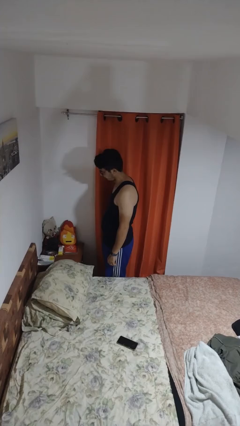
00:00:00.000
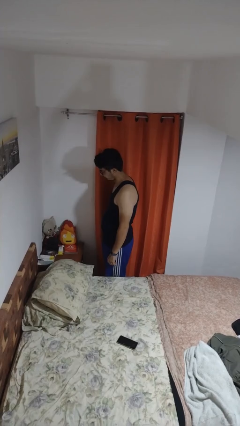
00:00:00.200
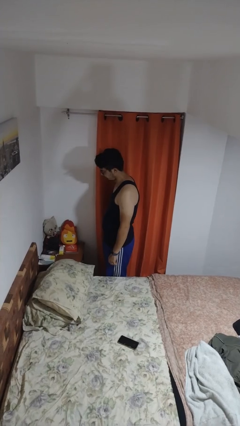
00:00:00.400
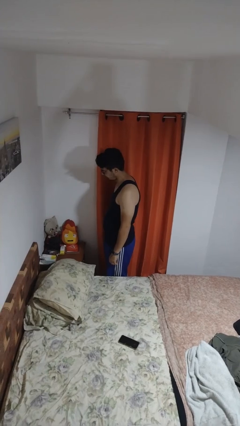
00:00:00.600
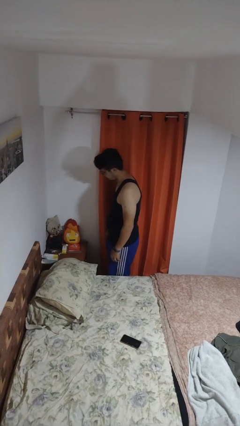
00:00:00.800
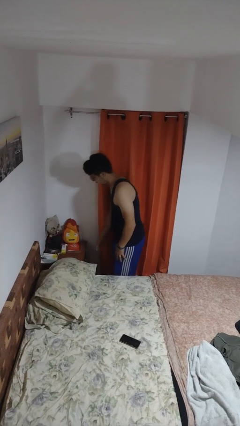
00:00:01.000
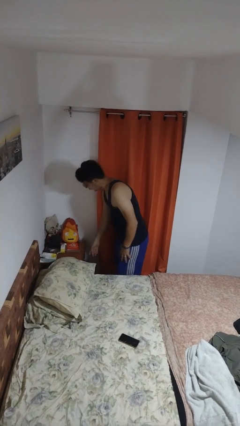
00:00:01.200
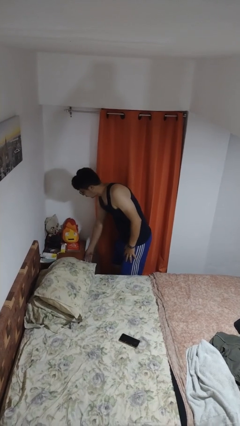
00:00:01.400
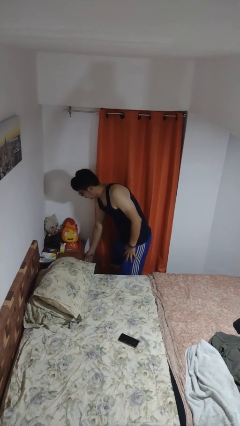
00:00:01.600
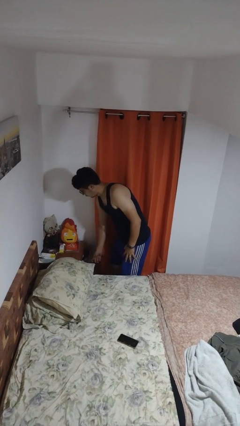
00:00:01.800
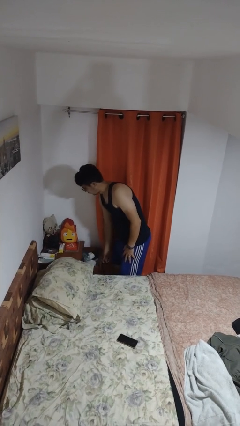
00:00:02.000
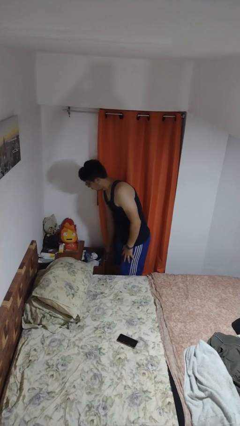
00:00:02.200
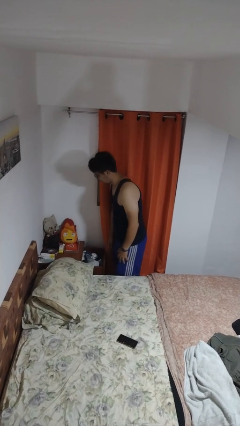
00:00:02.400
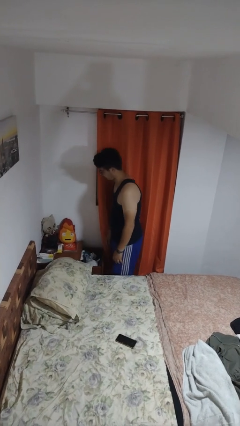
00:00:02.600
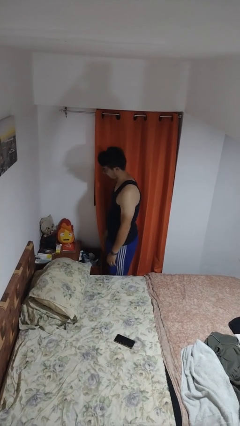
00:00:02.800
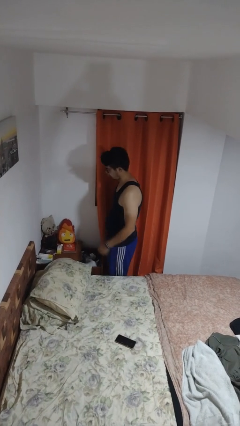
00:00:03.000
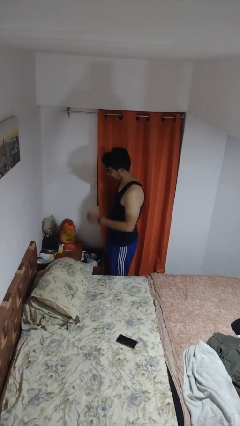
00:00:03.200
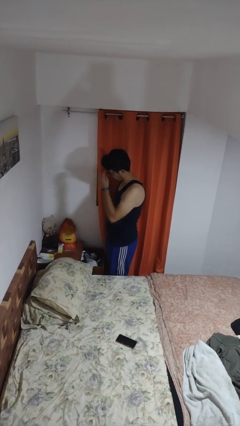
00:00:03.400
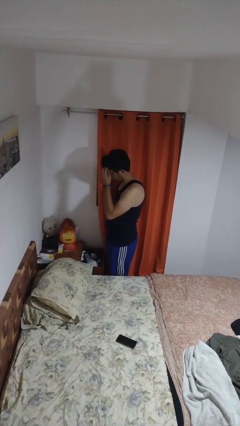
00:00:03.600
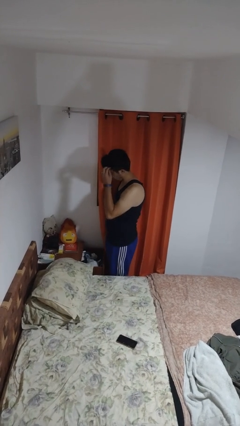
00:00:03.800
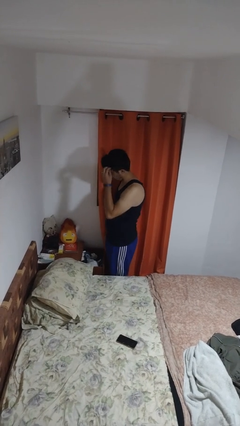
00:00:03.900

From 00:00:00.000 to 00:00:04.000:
person opens dresser drawer

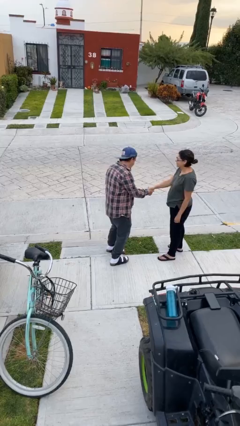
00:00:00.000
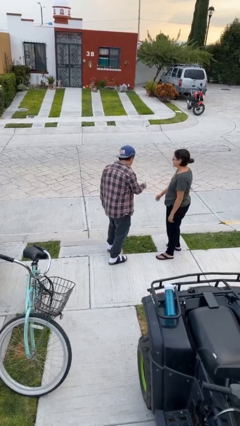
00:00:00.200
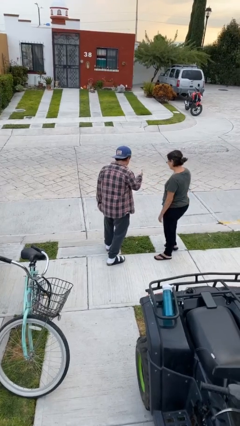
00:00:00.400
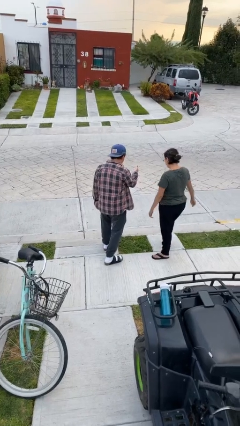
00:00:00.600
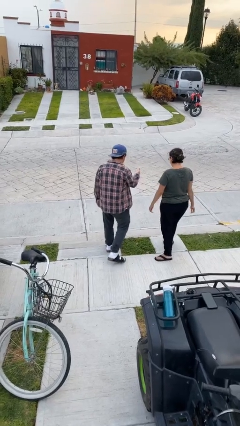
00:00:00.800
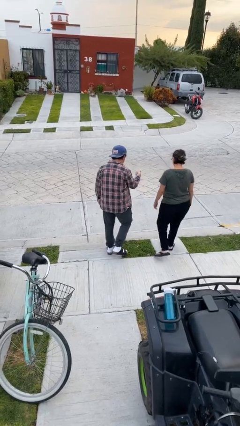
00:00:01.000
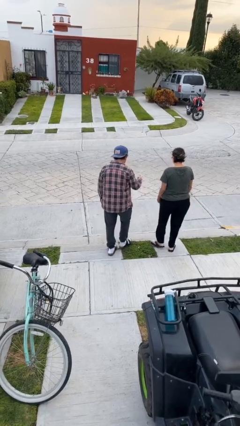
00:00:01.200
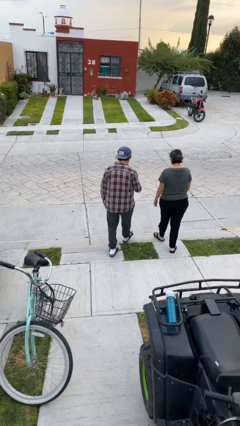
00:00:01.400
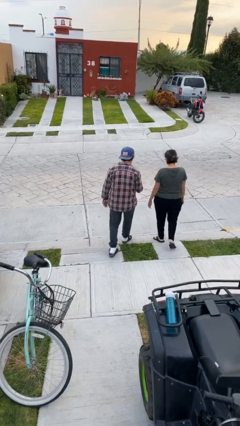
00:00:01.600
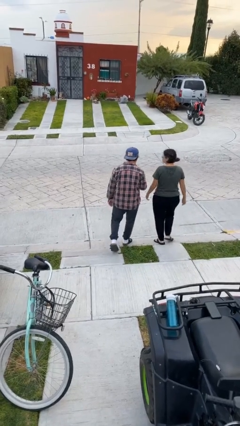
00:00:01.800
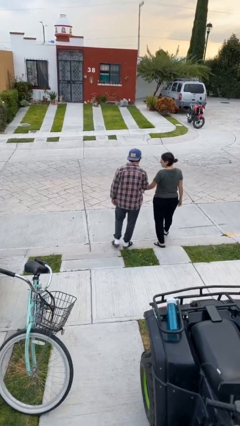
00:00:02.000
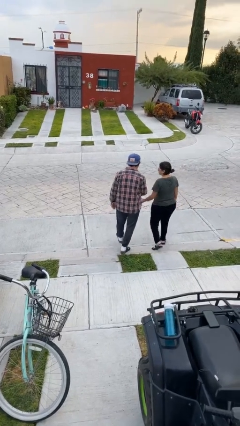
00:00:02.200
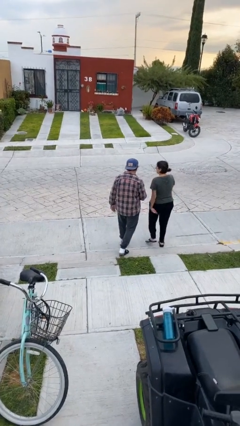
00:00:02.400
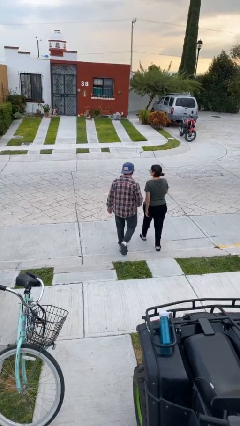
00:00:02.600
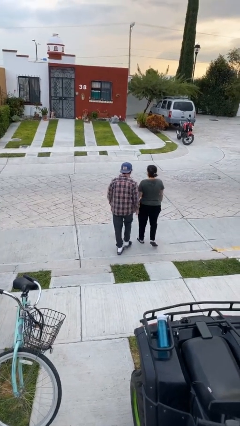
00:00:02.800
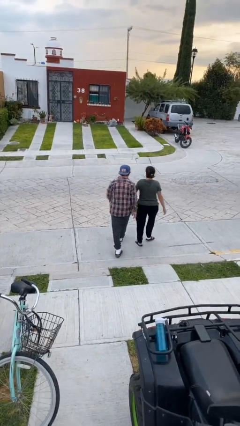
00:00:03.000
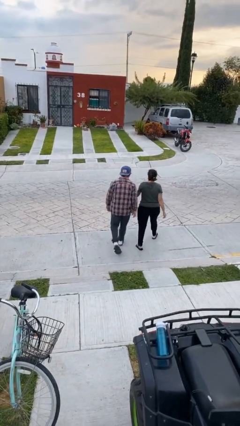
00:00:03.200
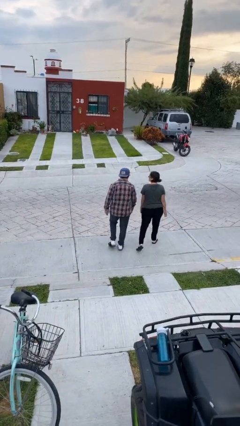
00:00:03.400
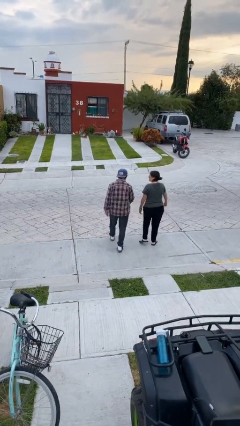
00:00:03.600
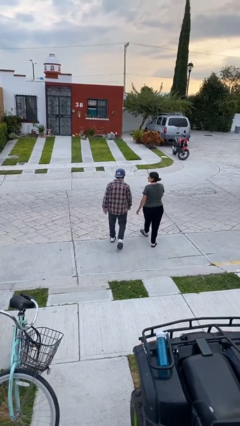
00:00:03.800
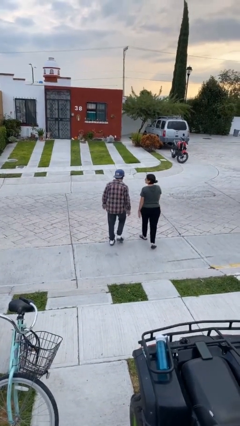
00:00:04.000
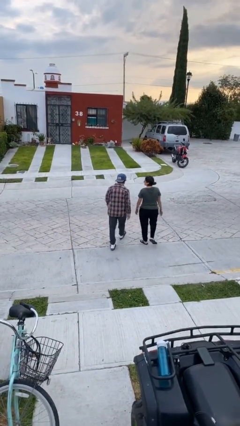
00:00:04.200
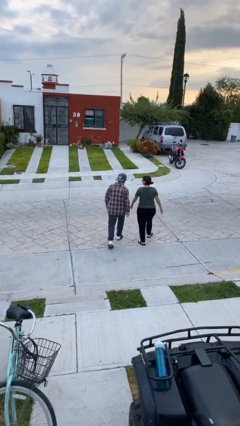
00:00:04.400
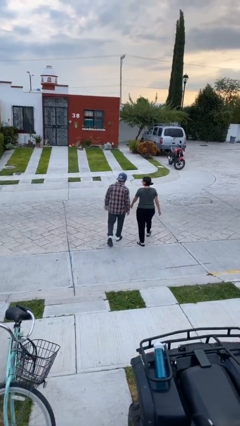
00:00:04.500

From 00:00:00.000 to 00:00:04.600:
person talks to person

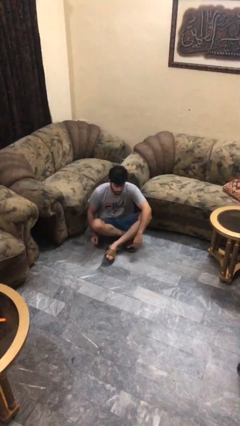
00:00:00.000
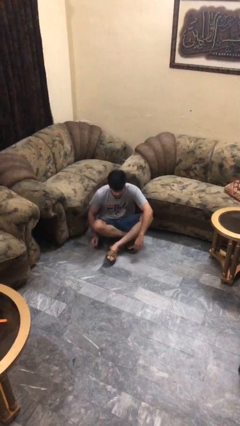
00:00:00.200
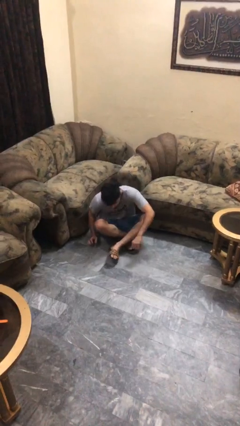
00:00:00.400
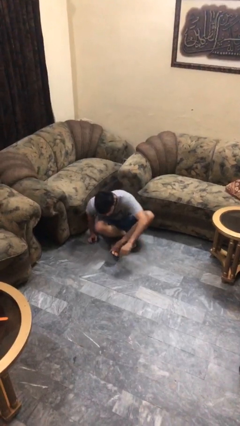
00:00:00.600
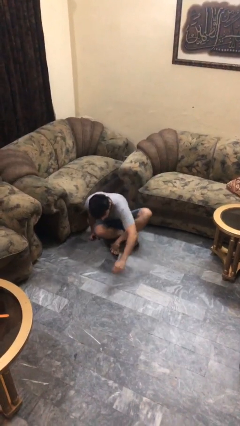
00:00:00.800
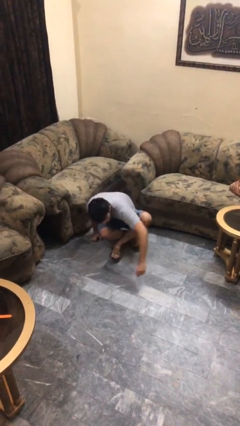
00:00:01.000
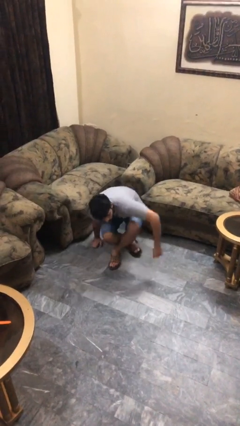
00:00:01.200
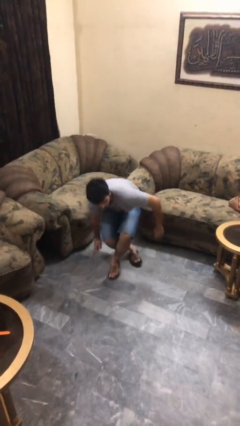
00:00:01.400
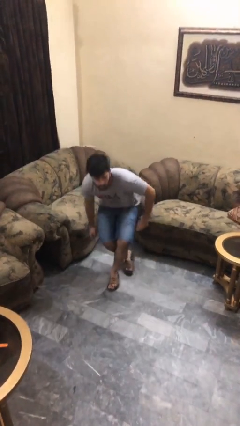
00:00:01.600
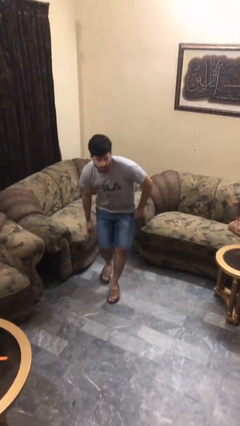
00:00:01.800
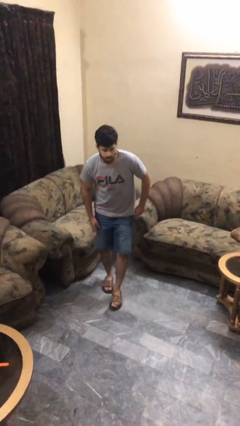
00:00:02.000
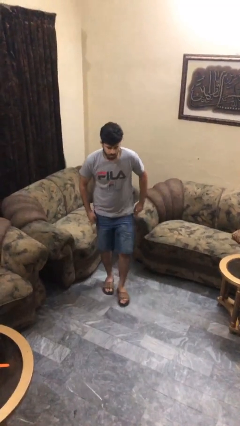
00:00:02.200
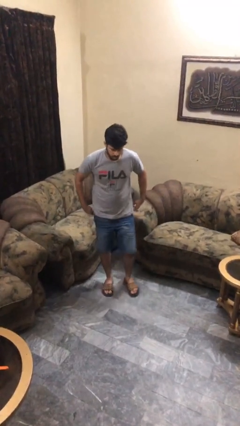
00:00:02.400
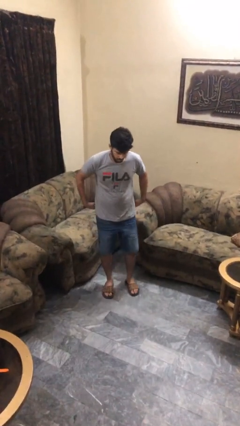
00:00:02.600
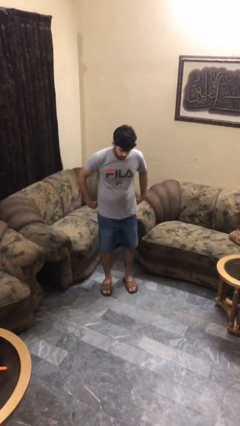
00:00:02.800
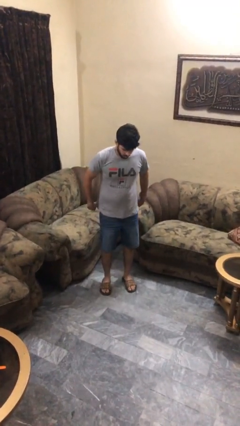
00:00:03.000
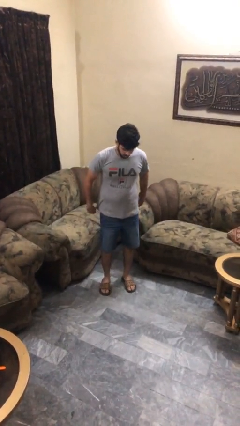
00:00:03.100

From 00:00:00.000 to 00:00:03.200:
person stands up from floor

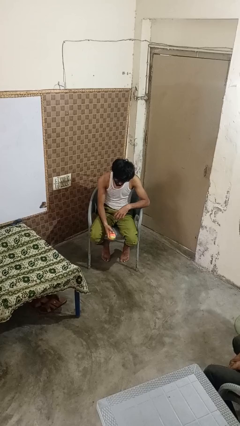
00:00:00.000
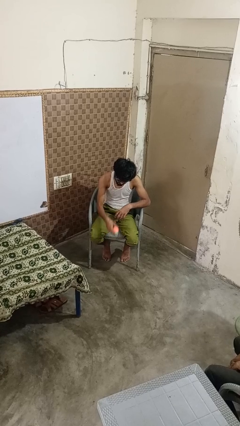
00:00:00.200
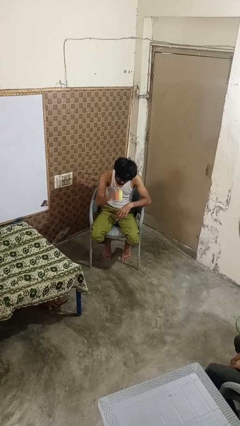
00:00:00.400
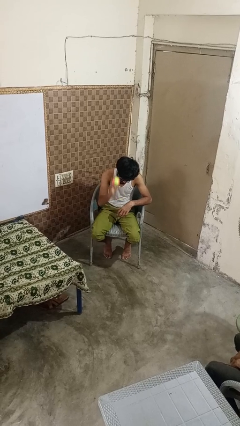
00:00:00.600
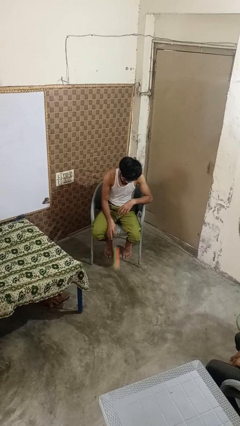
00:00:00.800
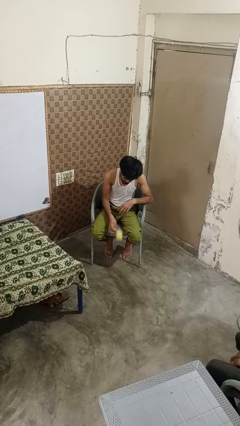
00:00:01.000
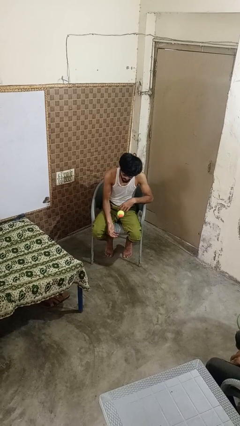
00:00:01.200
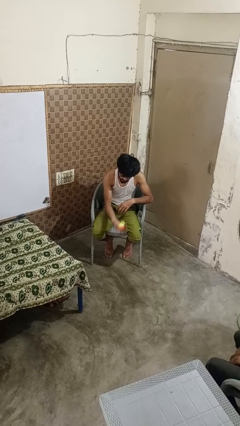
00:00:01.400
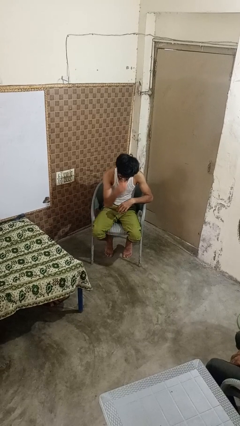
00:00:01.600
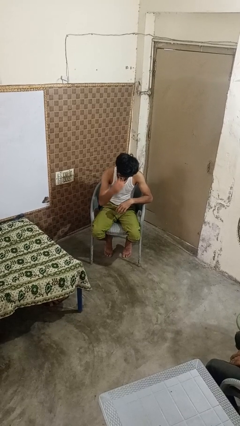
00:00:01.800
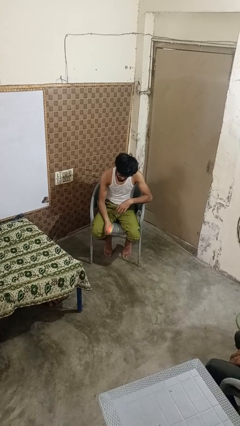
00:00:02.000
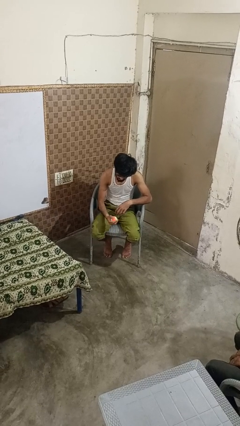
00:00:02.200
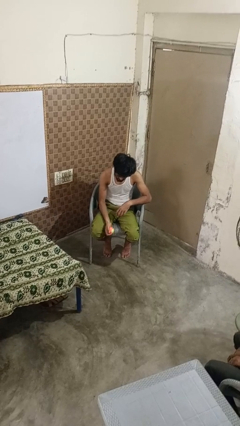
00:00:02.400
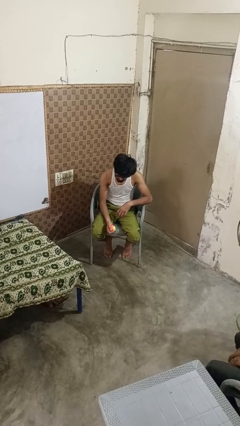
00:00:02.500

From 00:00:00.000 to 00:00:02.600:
person bounces ball on floor

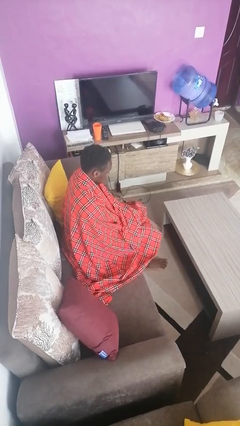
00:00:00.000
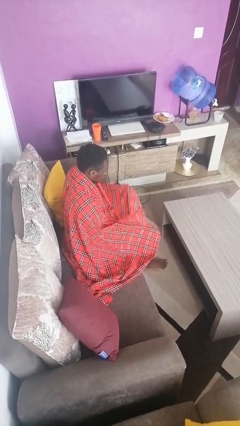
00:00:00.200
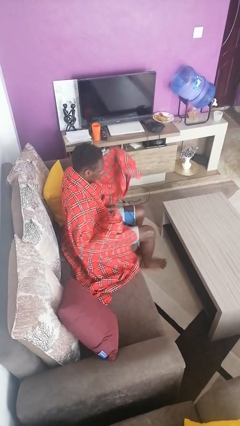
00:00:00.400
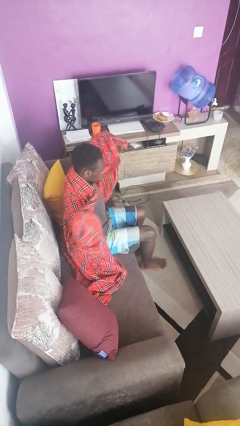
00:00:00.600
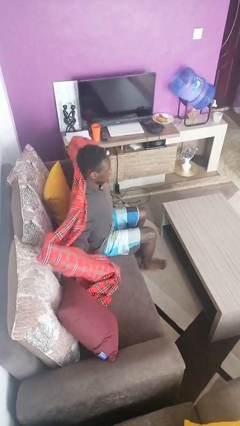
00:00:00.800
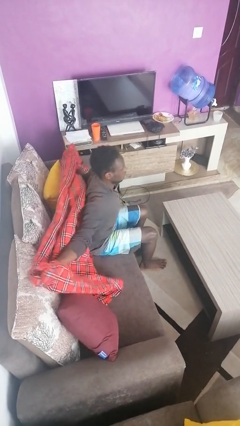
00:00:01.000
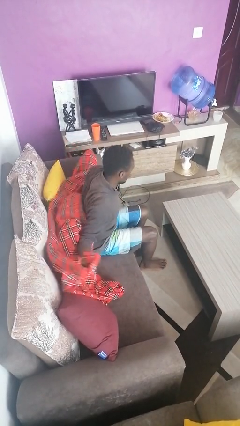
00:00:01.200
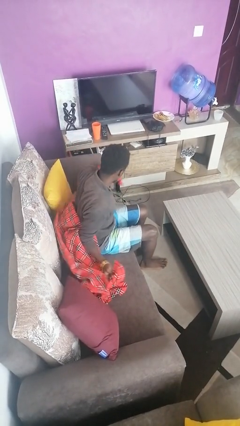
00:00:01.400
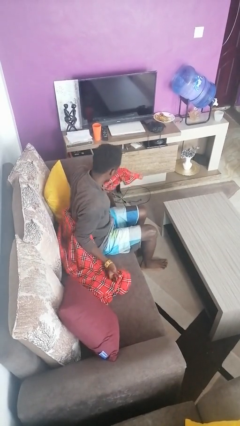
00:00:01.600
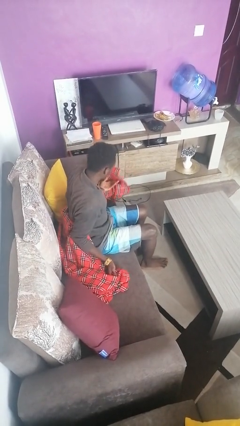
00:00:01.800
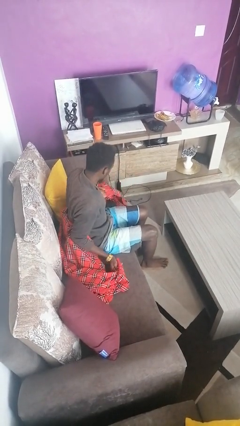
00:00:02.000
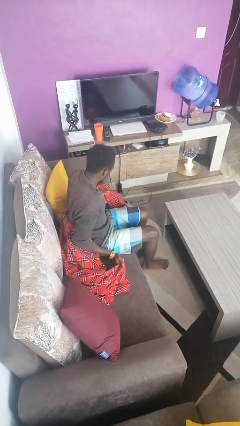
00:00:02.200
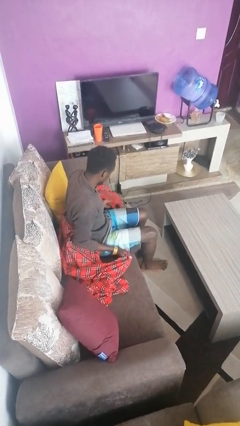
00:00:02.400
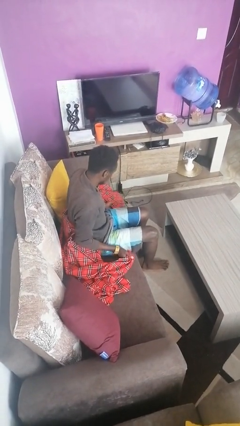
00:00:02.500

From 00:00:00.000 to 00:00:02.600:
person uncovers with blanket

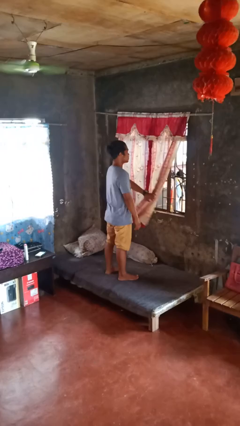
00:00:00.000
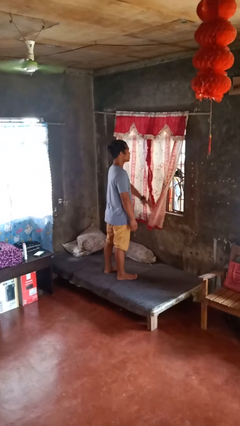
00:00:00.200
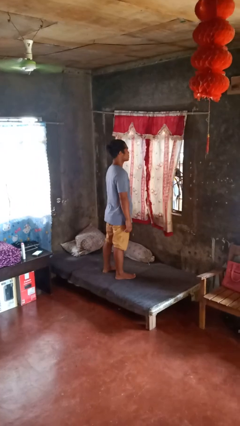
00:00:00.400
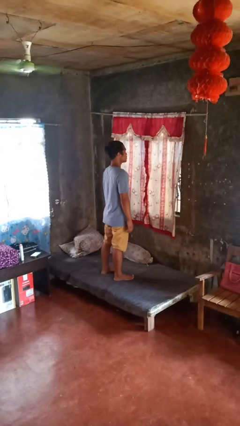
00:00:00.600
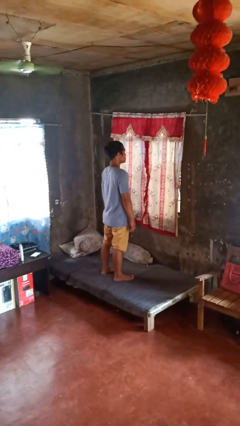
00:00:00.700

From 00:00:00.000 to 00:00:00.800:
person closes curtains
